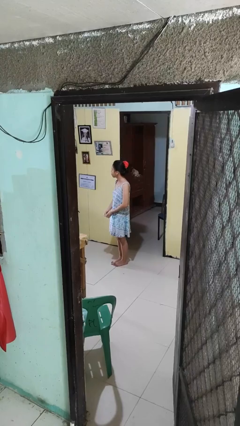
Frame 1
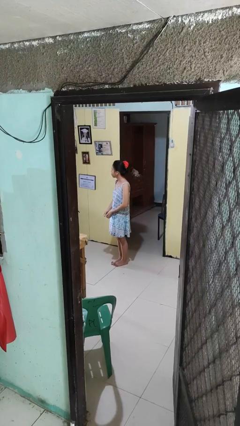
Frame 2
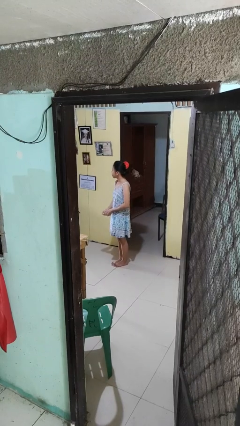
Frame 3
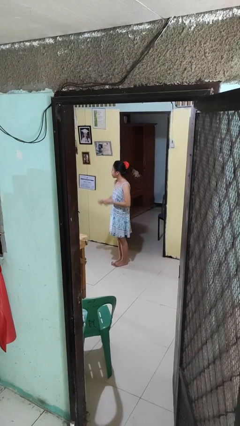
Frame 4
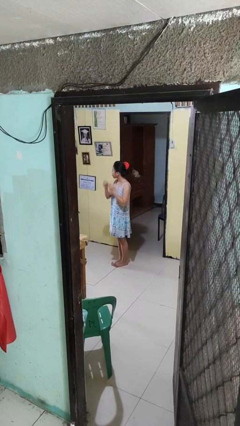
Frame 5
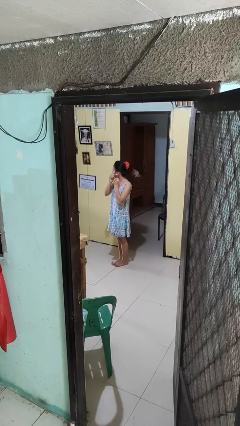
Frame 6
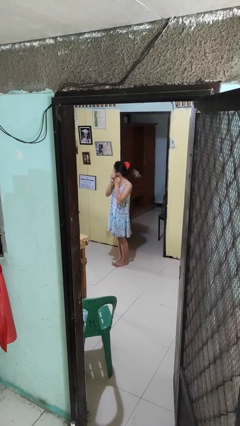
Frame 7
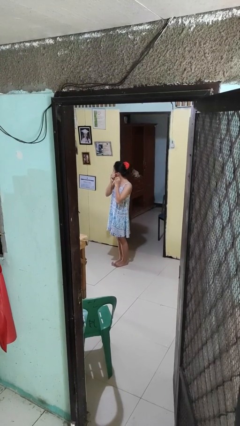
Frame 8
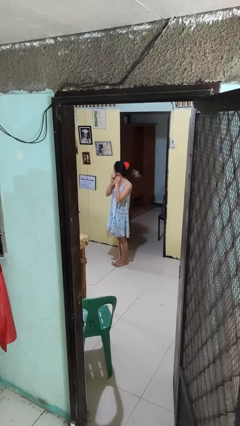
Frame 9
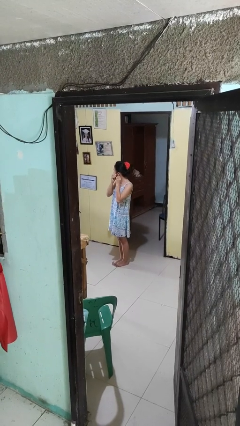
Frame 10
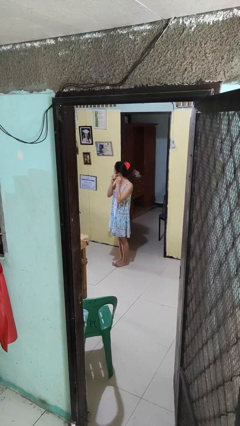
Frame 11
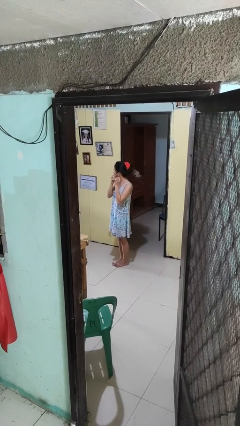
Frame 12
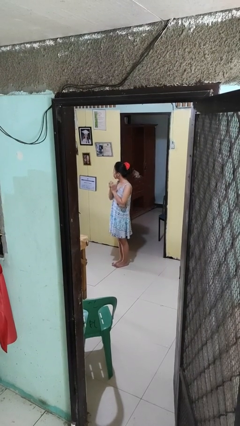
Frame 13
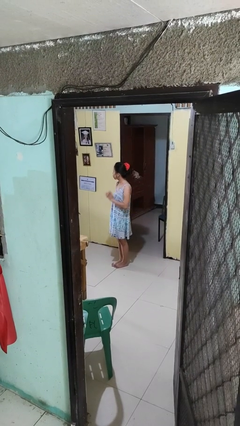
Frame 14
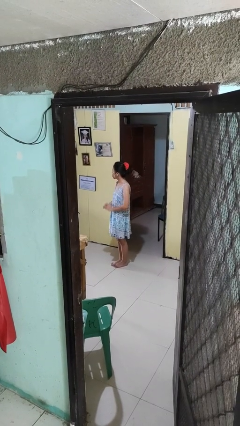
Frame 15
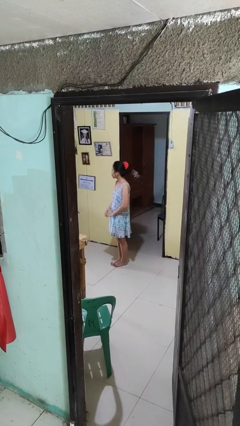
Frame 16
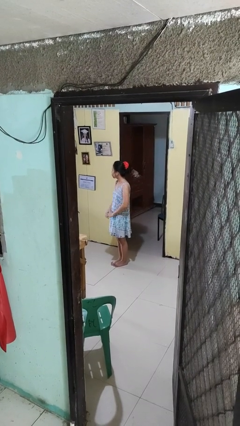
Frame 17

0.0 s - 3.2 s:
person puts on earrings

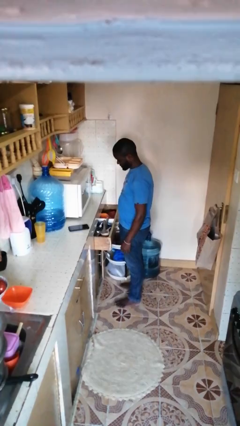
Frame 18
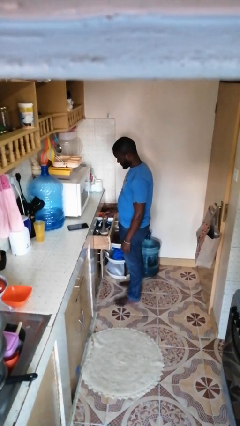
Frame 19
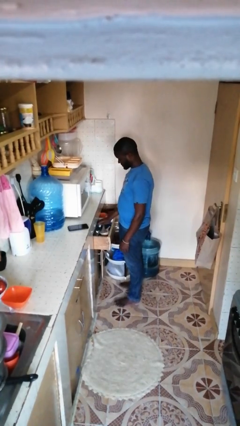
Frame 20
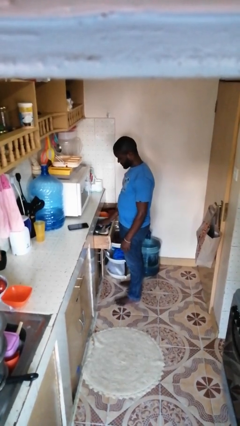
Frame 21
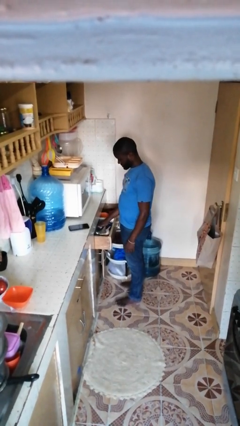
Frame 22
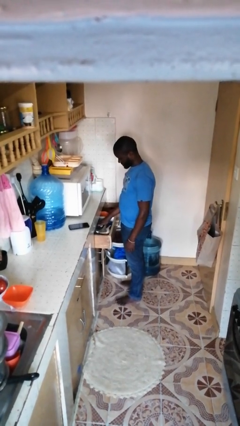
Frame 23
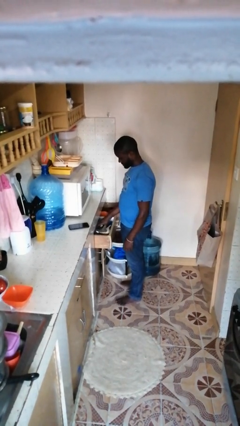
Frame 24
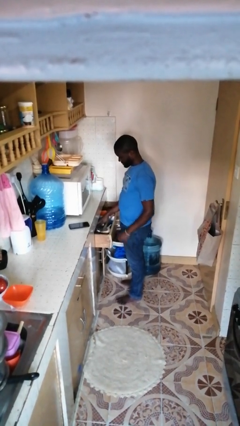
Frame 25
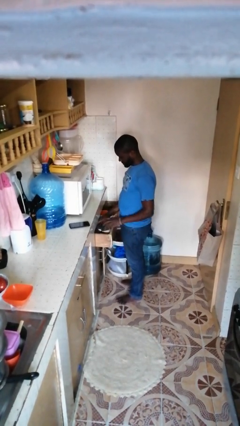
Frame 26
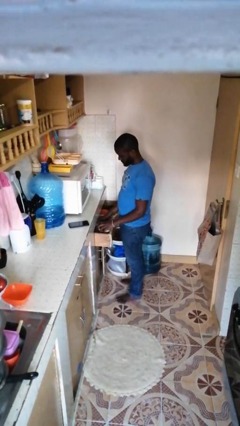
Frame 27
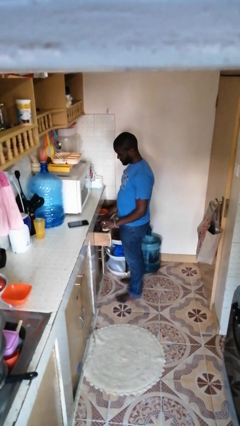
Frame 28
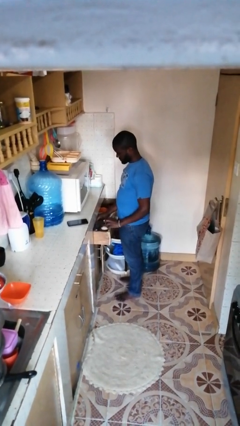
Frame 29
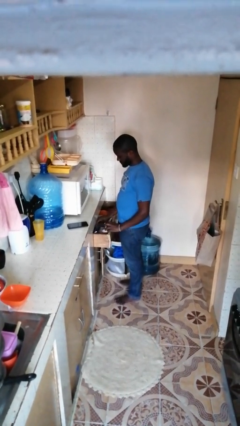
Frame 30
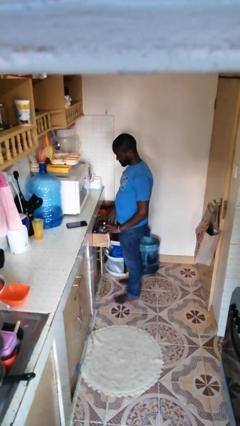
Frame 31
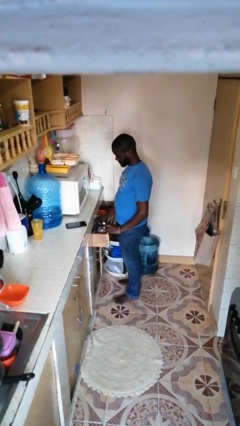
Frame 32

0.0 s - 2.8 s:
person takes object from kitchen drawer

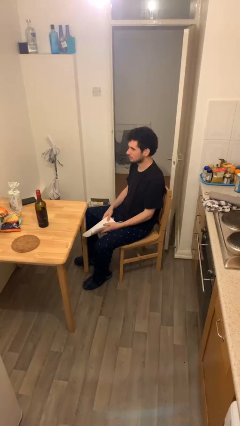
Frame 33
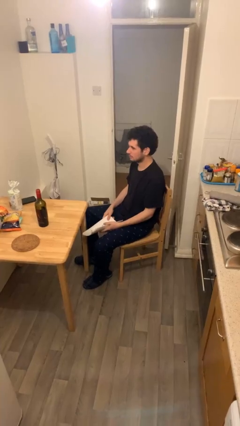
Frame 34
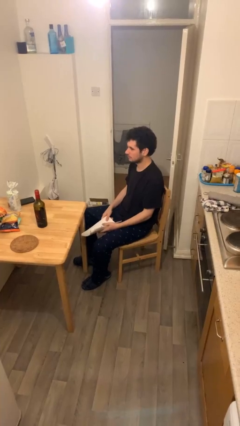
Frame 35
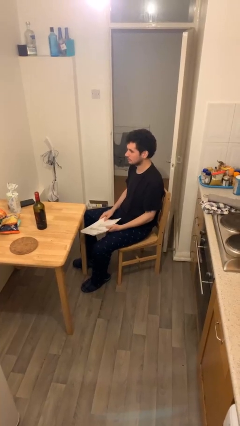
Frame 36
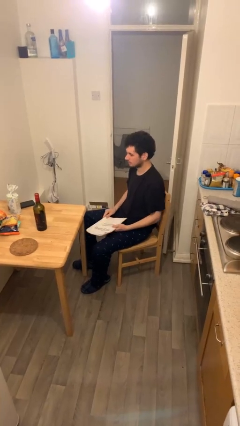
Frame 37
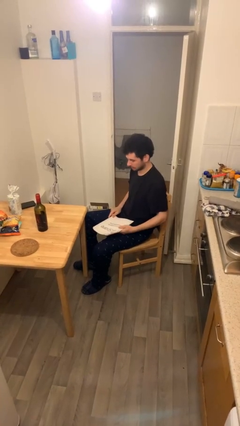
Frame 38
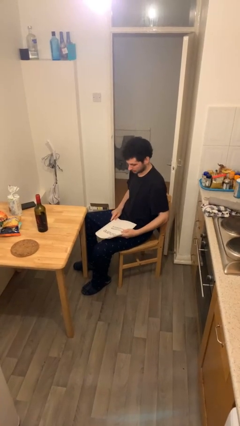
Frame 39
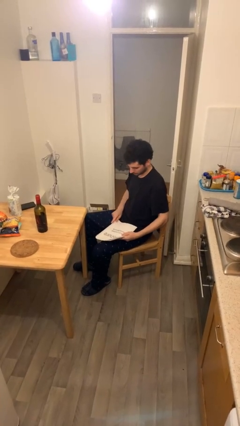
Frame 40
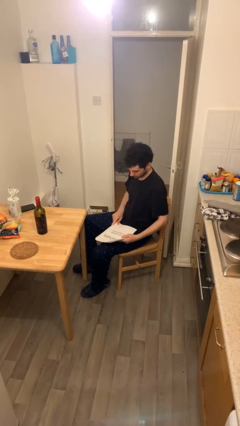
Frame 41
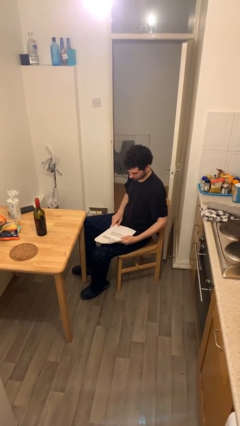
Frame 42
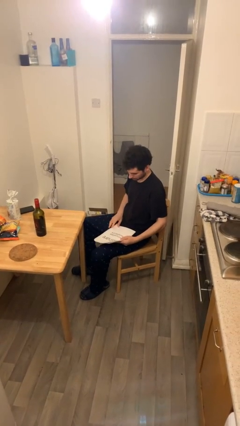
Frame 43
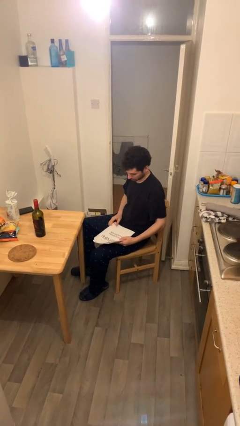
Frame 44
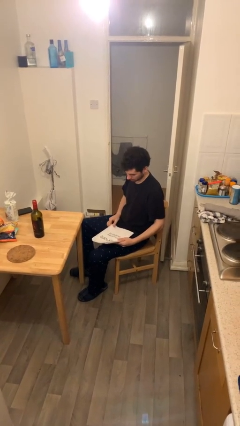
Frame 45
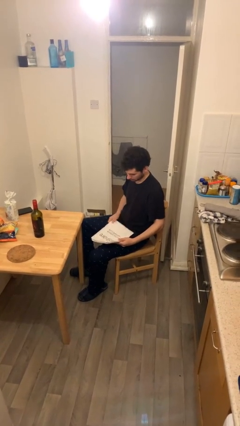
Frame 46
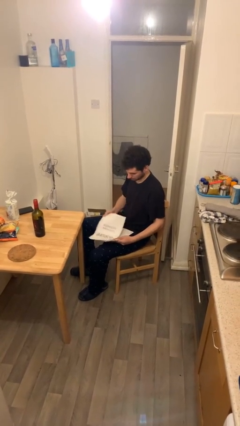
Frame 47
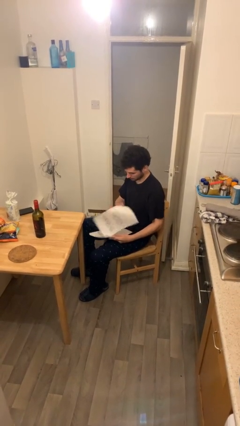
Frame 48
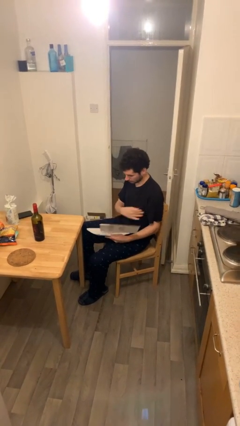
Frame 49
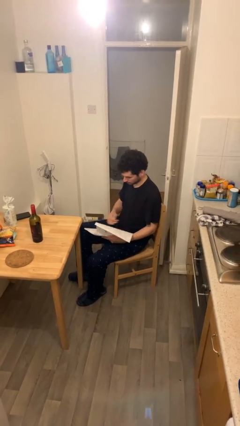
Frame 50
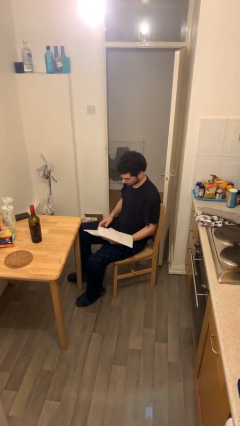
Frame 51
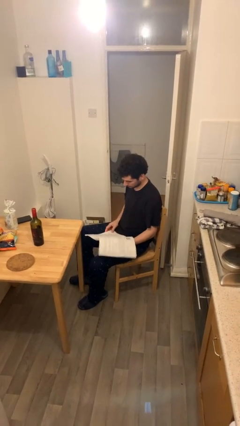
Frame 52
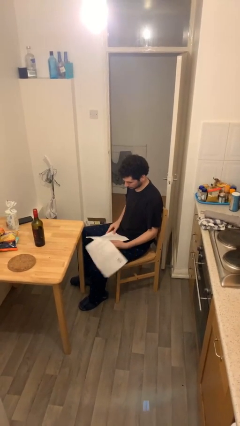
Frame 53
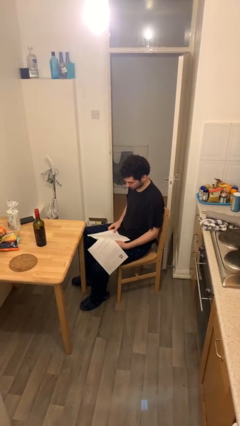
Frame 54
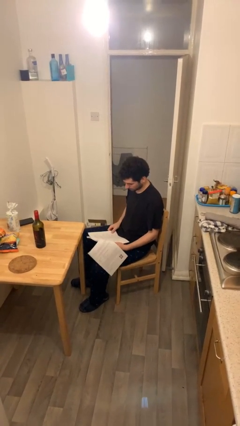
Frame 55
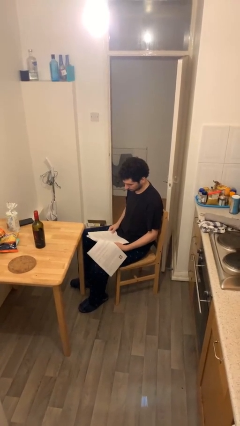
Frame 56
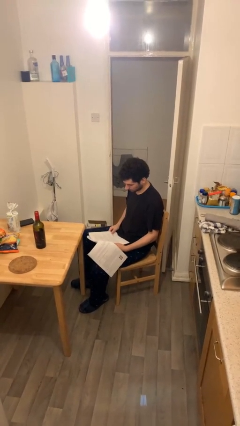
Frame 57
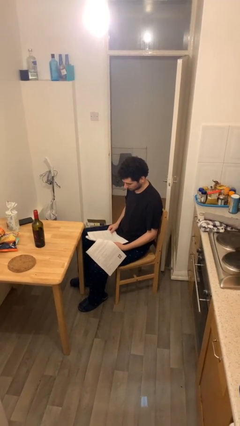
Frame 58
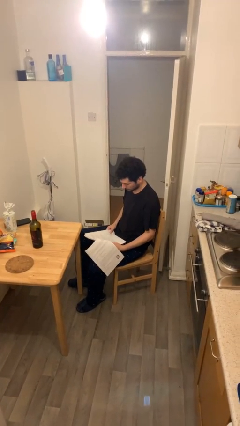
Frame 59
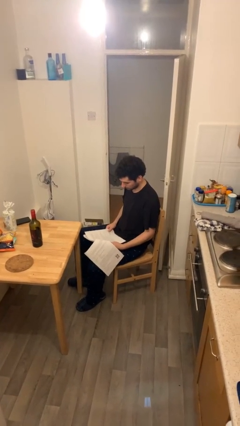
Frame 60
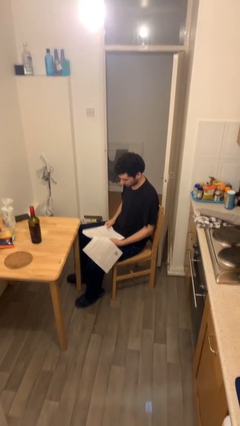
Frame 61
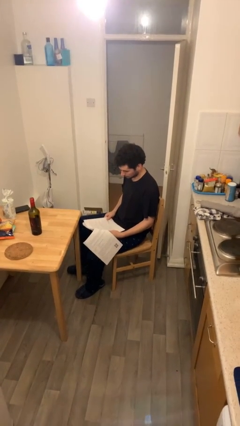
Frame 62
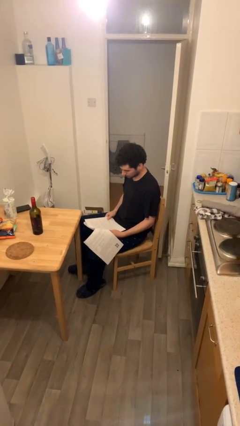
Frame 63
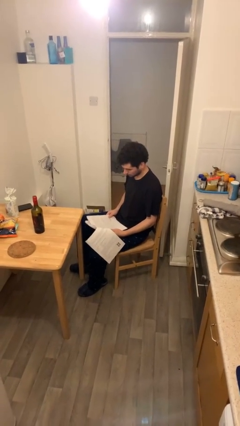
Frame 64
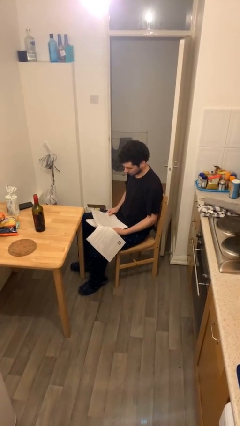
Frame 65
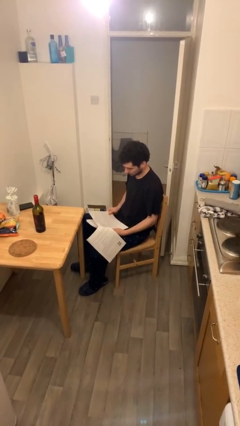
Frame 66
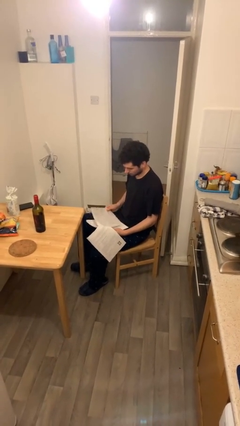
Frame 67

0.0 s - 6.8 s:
person reads document

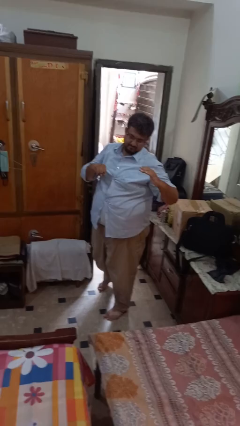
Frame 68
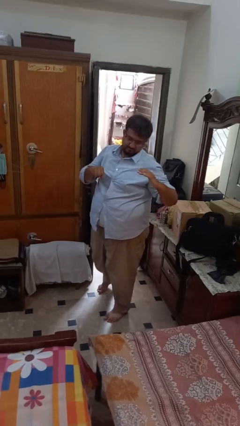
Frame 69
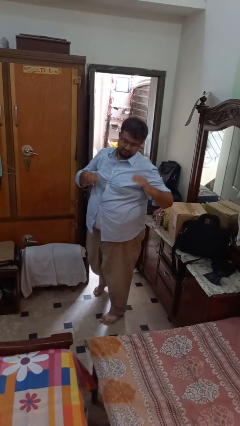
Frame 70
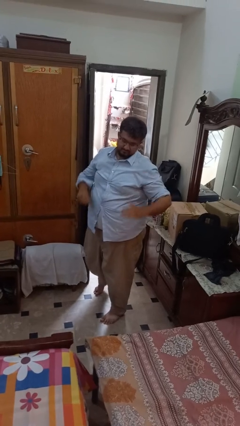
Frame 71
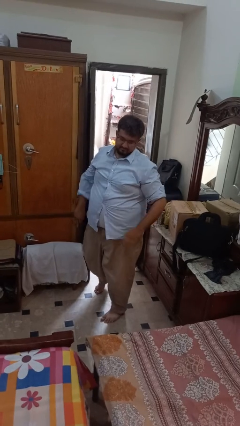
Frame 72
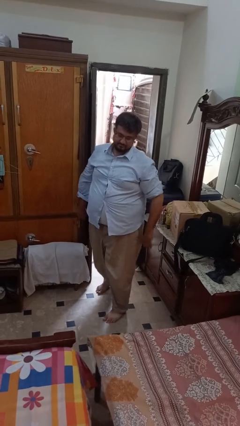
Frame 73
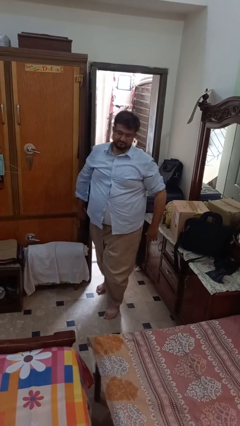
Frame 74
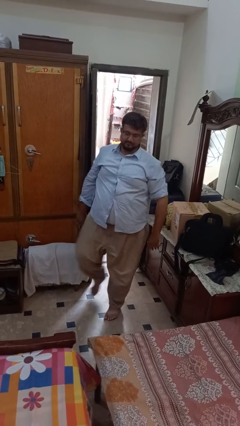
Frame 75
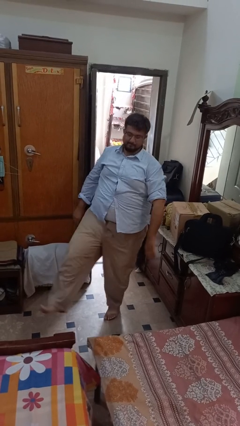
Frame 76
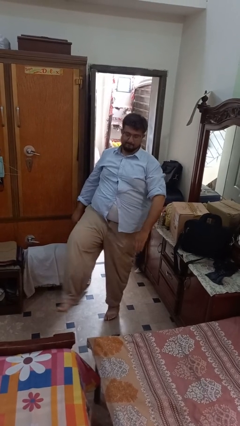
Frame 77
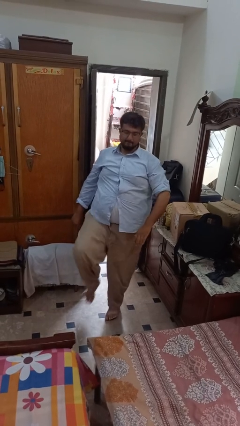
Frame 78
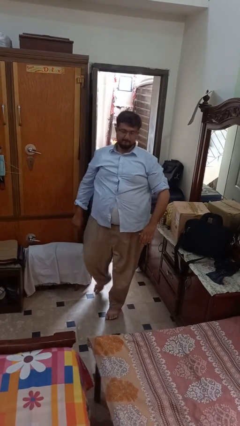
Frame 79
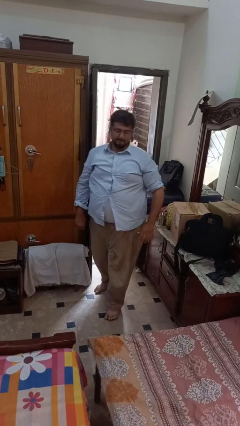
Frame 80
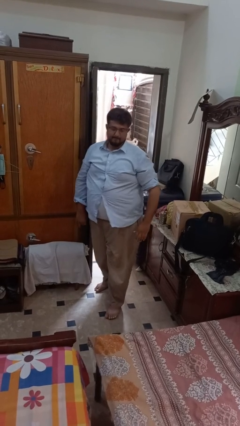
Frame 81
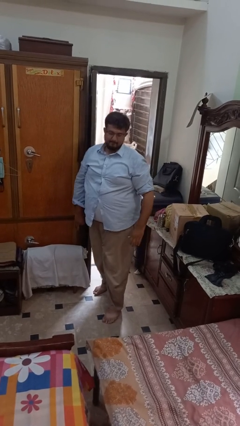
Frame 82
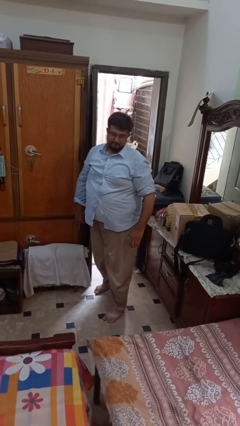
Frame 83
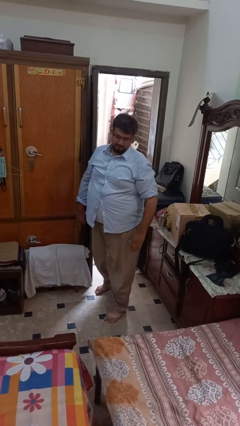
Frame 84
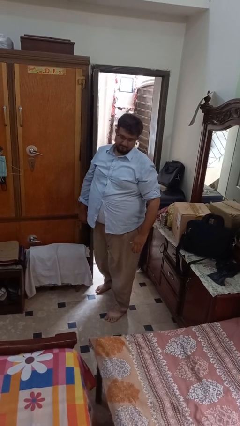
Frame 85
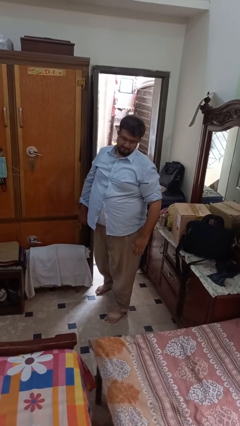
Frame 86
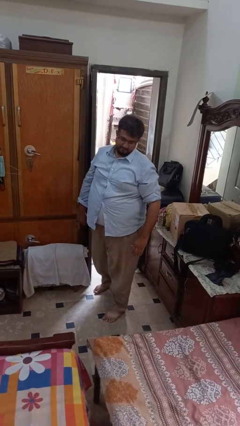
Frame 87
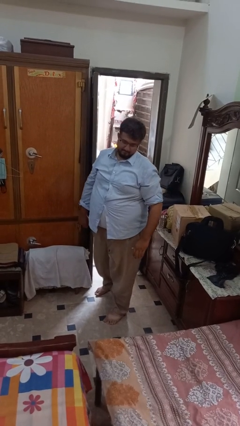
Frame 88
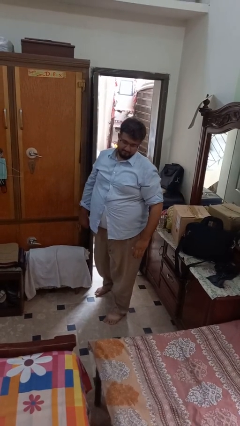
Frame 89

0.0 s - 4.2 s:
person karate kicks

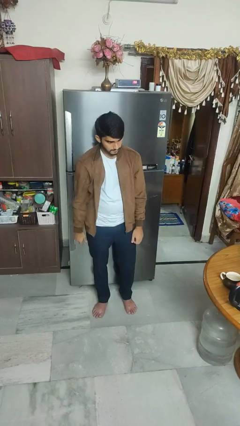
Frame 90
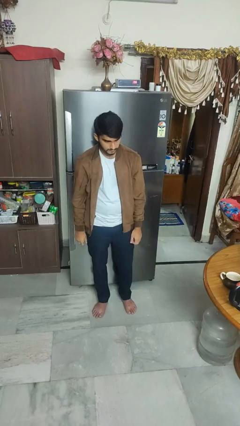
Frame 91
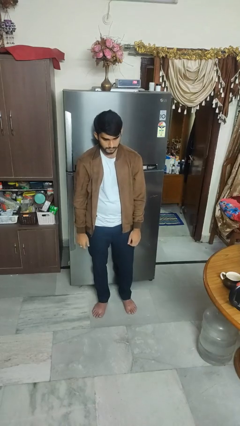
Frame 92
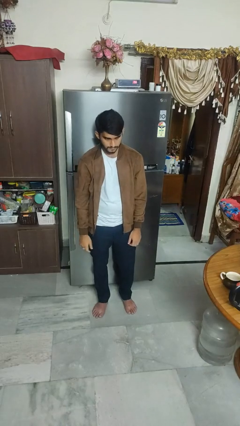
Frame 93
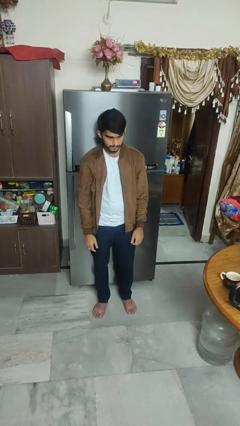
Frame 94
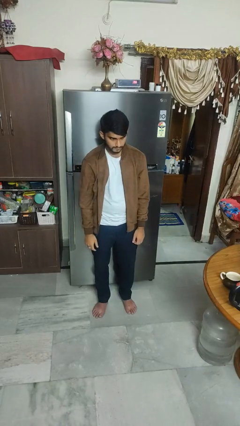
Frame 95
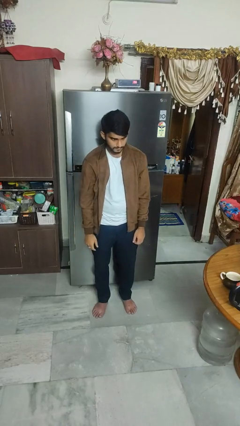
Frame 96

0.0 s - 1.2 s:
person gestures call me
